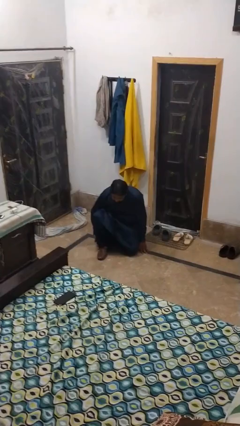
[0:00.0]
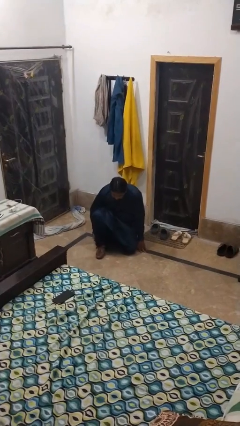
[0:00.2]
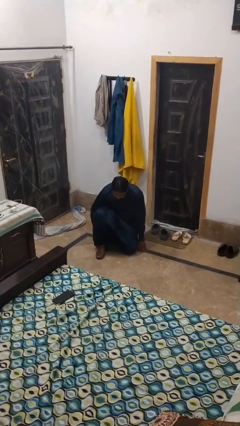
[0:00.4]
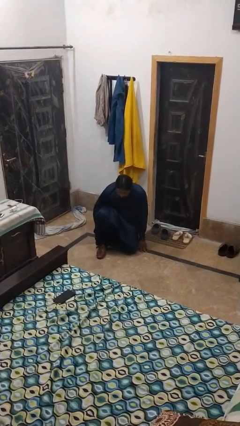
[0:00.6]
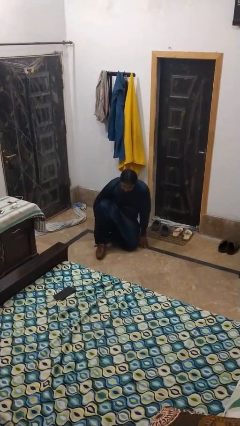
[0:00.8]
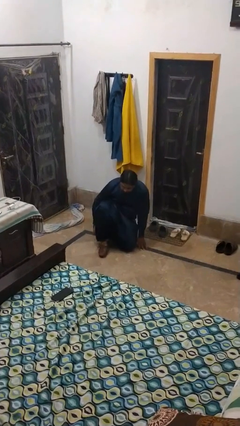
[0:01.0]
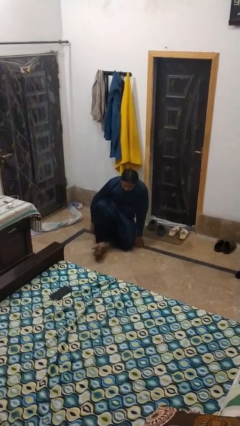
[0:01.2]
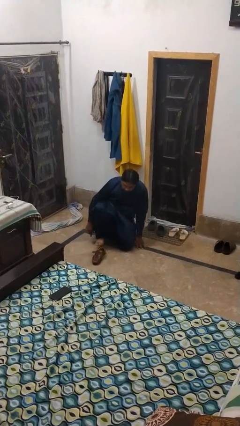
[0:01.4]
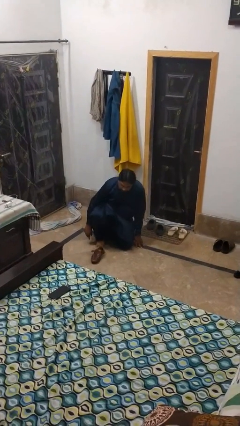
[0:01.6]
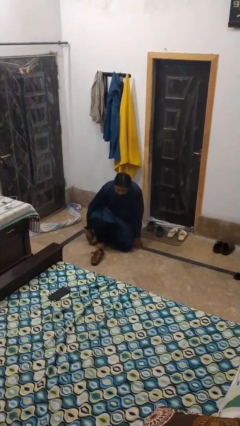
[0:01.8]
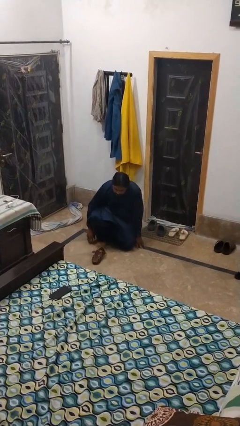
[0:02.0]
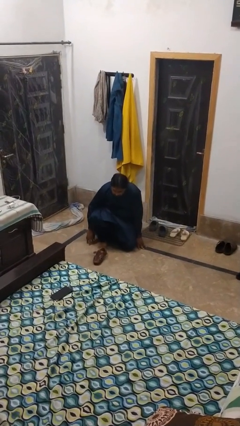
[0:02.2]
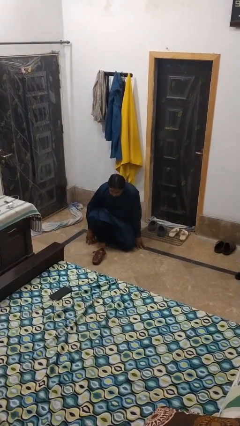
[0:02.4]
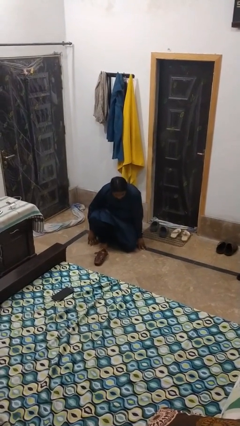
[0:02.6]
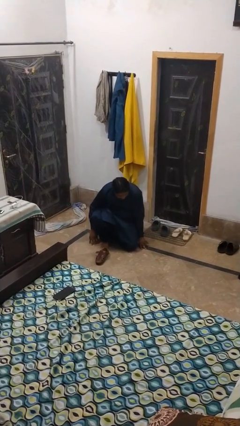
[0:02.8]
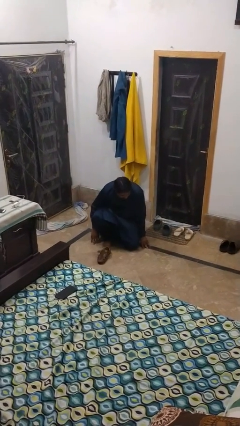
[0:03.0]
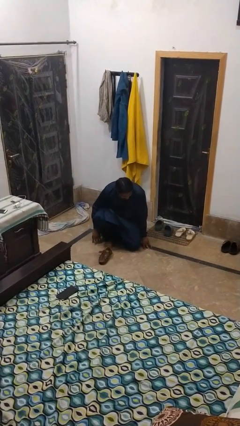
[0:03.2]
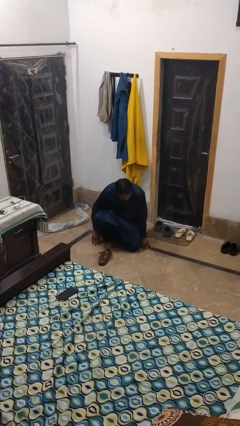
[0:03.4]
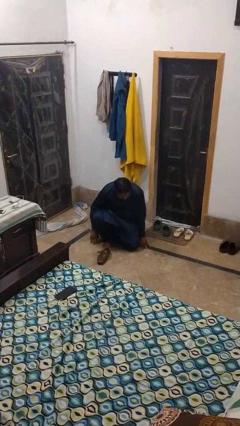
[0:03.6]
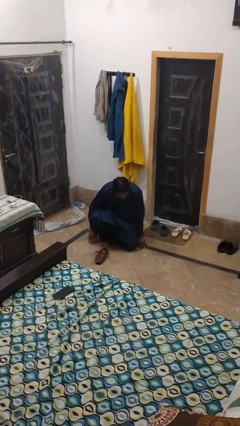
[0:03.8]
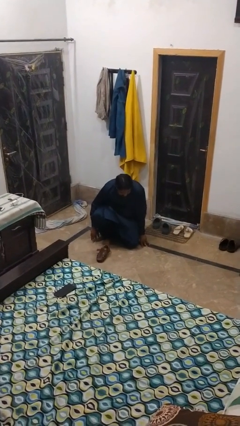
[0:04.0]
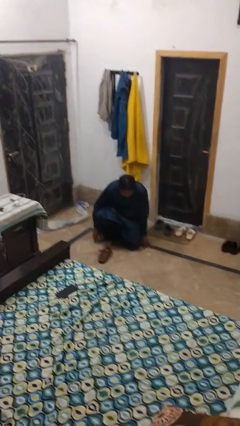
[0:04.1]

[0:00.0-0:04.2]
person takes off shoes

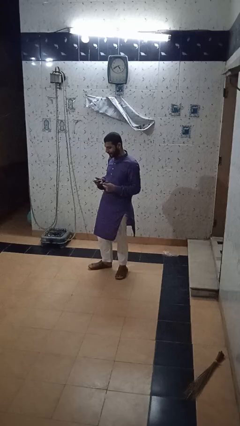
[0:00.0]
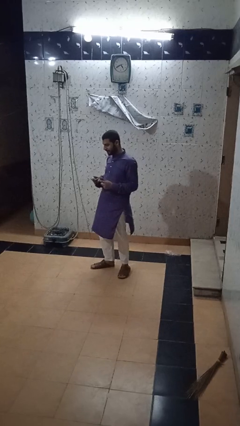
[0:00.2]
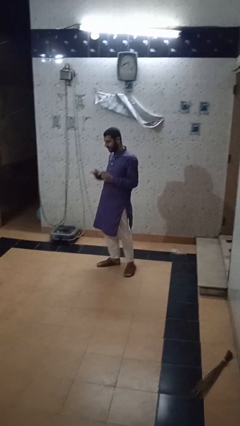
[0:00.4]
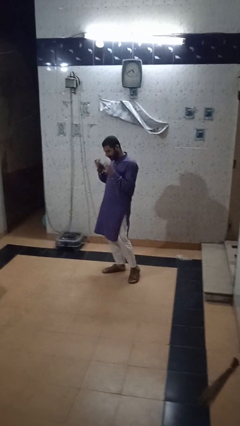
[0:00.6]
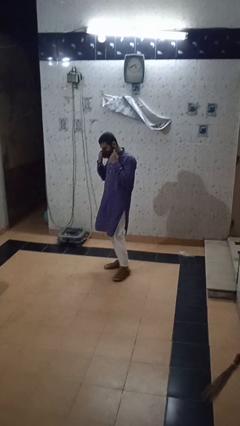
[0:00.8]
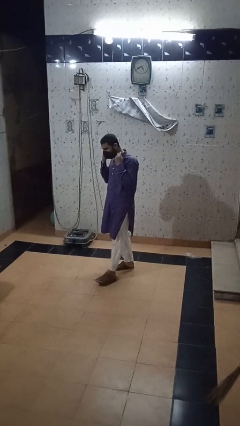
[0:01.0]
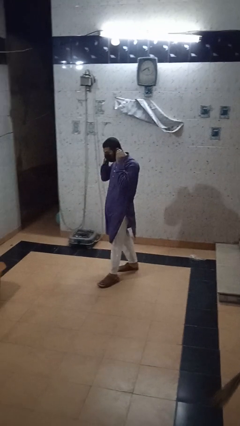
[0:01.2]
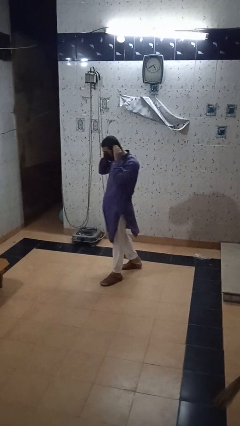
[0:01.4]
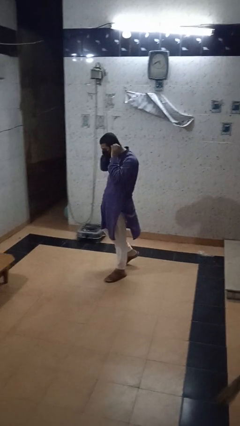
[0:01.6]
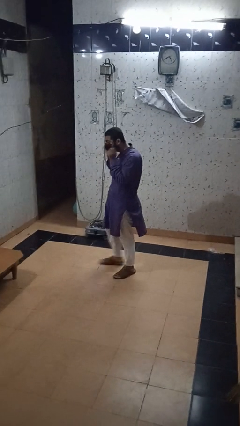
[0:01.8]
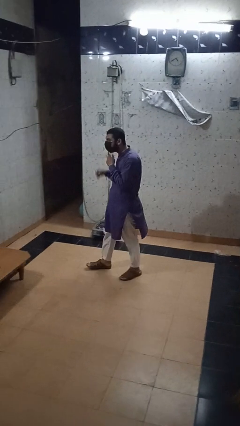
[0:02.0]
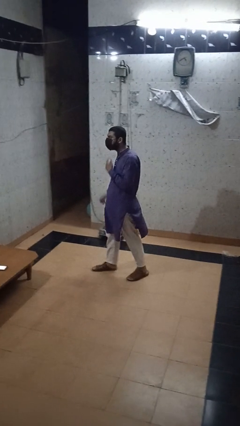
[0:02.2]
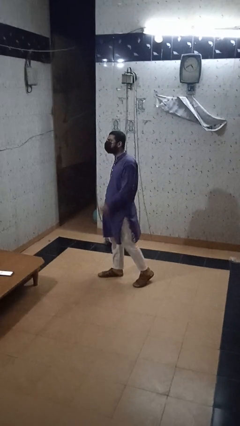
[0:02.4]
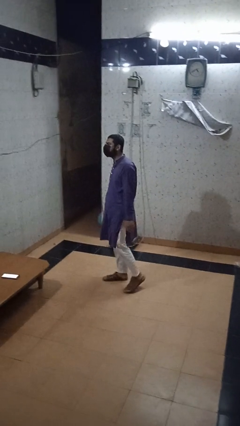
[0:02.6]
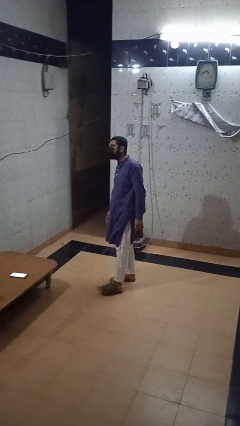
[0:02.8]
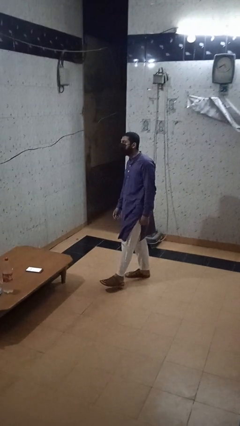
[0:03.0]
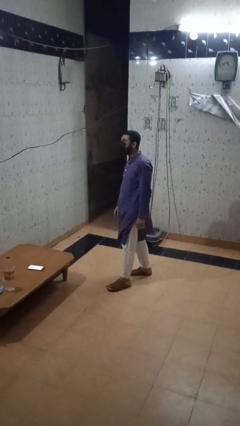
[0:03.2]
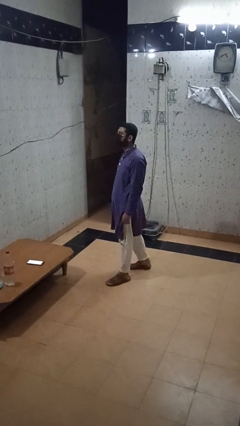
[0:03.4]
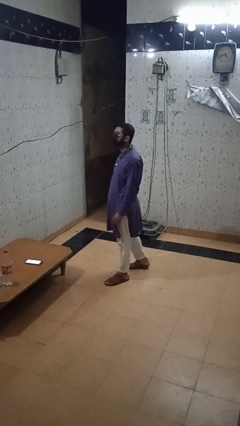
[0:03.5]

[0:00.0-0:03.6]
person puts on facemask

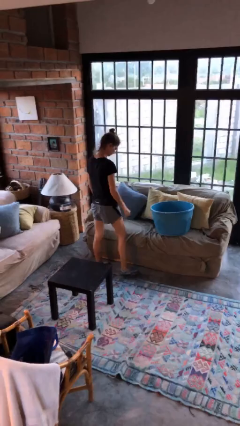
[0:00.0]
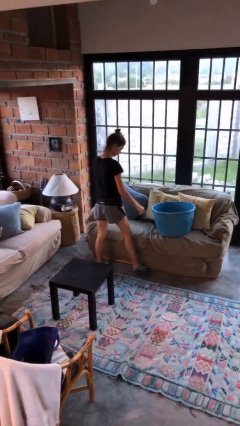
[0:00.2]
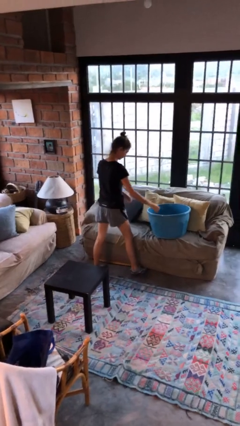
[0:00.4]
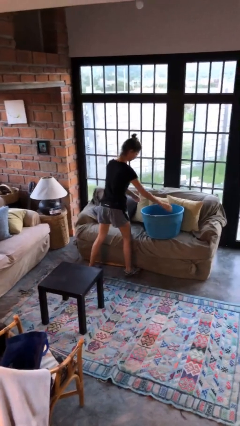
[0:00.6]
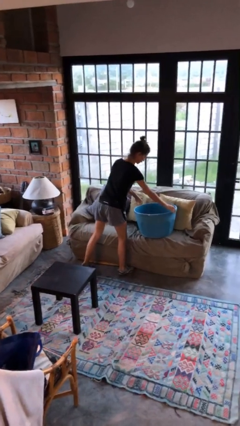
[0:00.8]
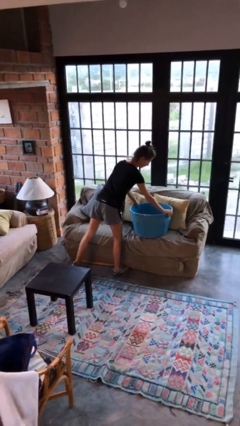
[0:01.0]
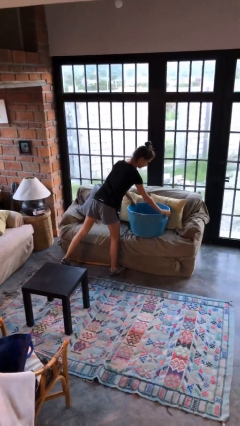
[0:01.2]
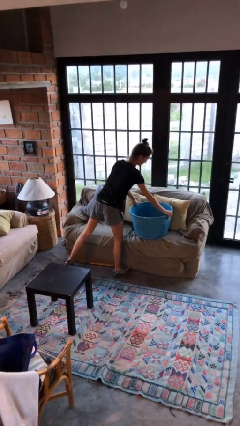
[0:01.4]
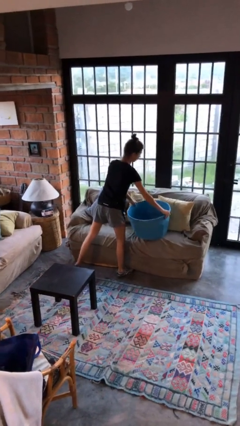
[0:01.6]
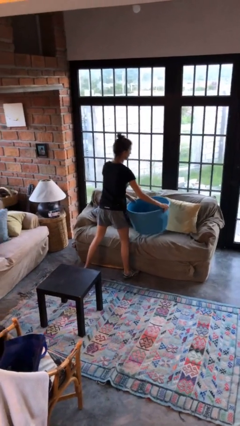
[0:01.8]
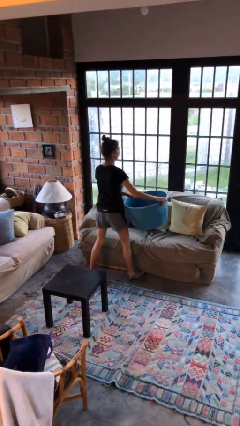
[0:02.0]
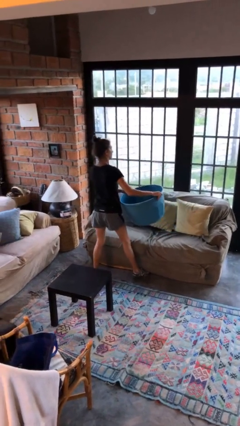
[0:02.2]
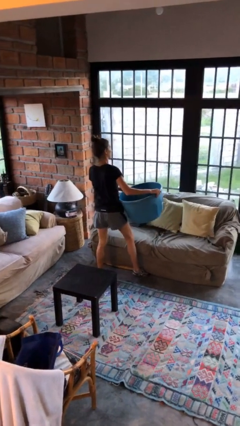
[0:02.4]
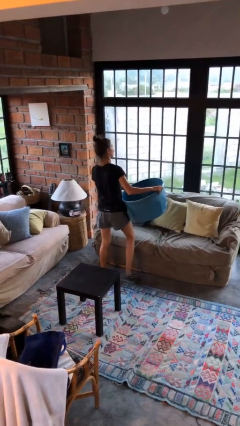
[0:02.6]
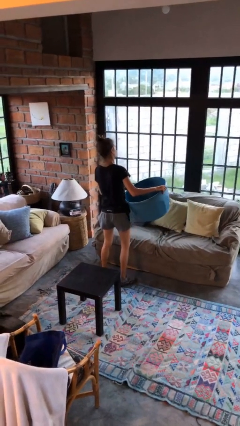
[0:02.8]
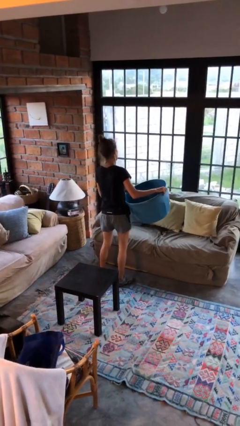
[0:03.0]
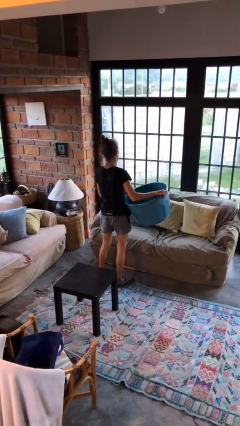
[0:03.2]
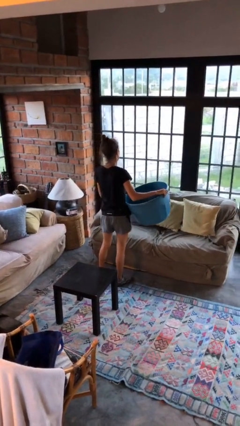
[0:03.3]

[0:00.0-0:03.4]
person picks up object from couch

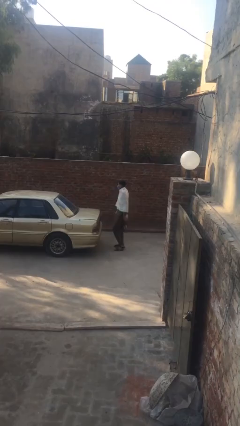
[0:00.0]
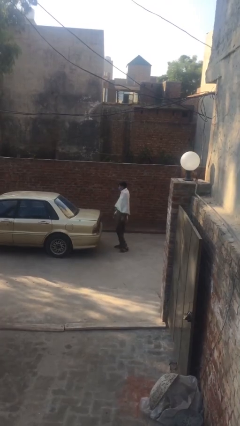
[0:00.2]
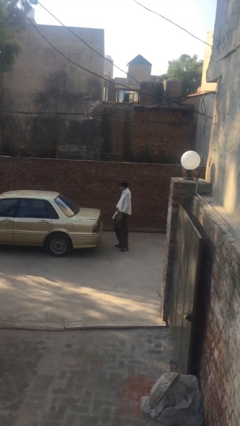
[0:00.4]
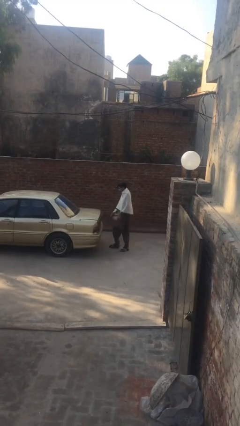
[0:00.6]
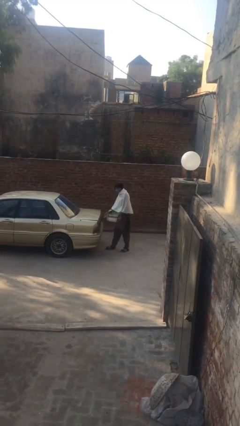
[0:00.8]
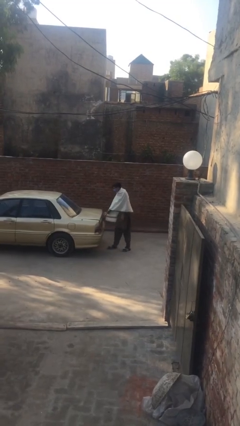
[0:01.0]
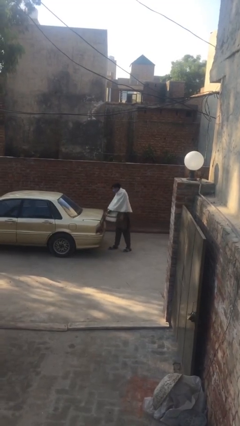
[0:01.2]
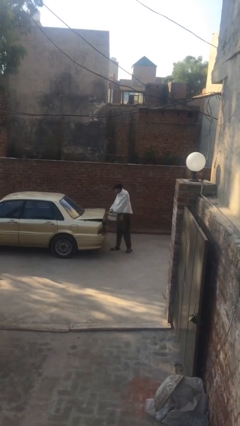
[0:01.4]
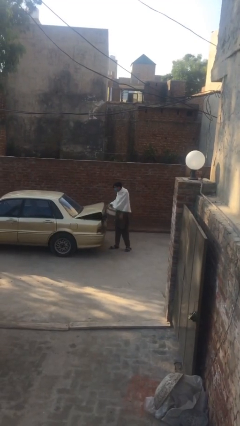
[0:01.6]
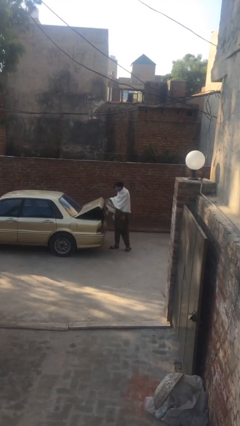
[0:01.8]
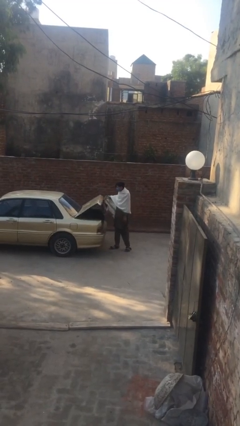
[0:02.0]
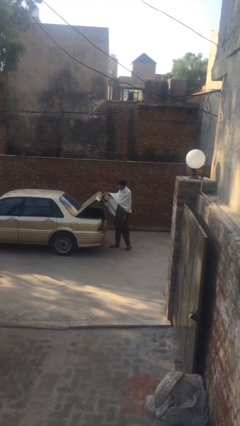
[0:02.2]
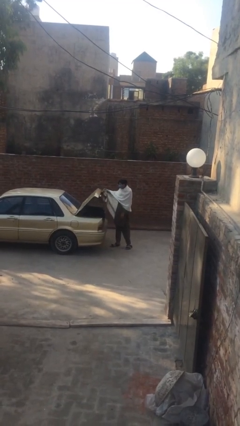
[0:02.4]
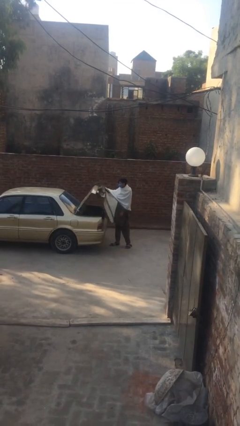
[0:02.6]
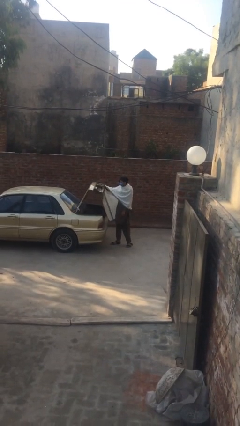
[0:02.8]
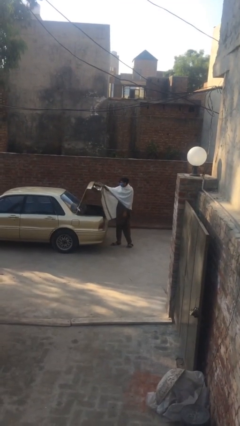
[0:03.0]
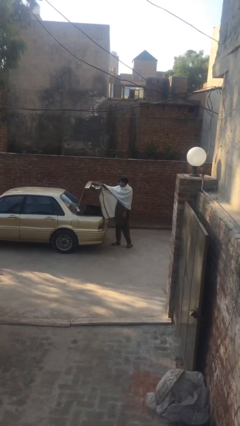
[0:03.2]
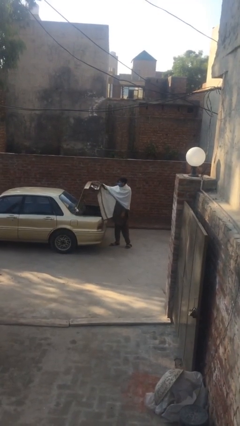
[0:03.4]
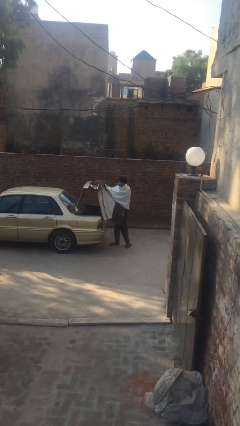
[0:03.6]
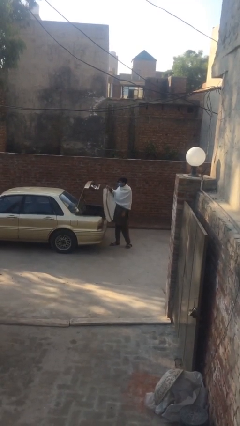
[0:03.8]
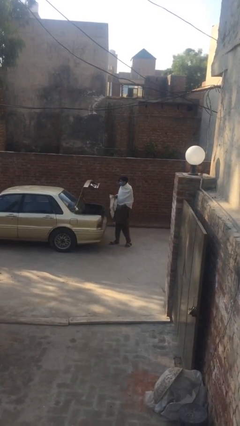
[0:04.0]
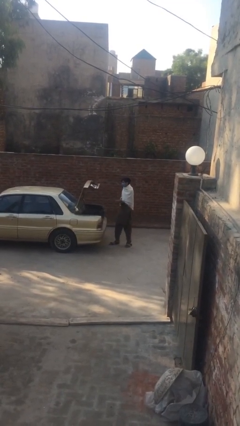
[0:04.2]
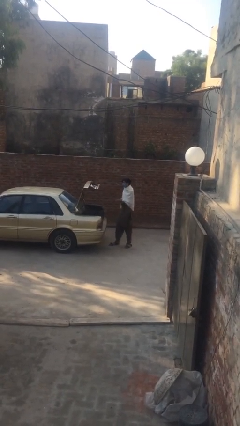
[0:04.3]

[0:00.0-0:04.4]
person opens car trunk

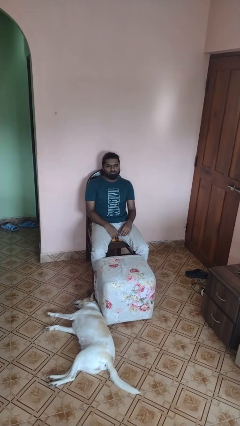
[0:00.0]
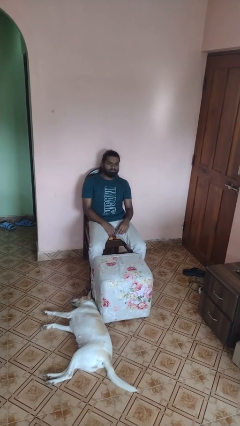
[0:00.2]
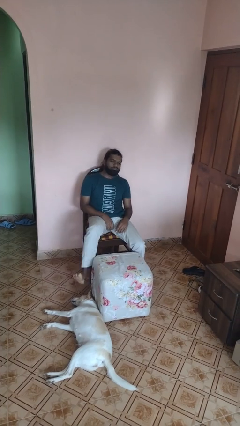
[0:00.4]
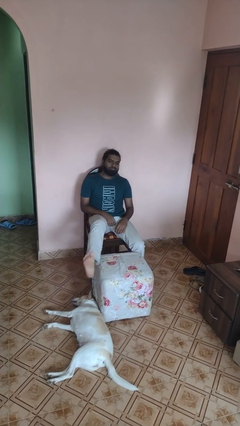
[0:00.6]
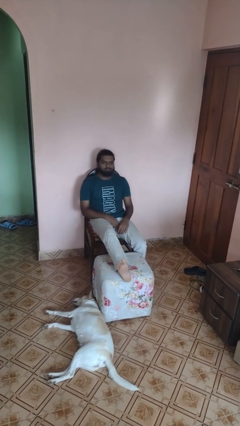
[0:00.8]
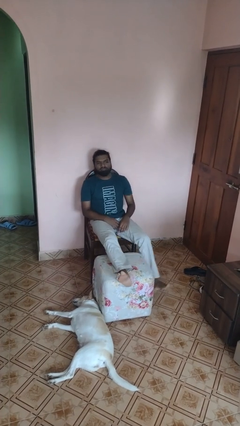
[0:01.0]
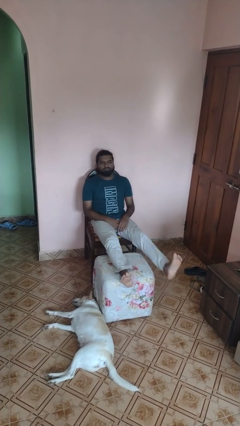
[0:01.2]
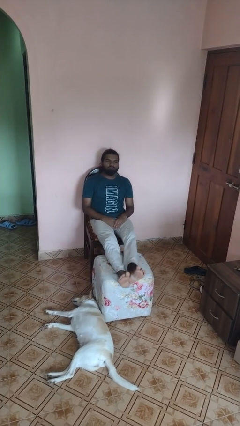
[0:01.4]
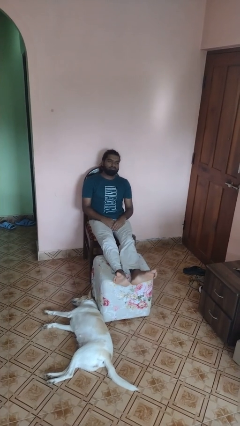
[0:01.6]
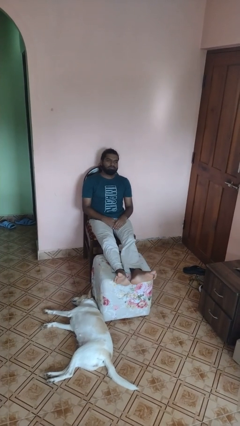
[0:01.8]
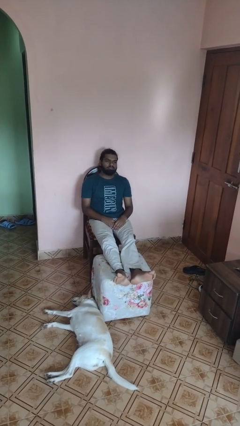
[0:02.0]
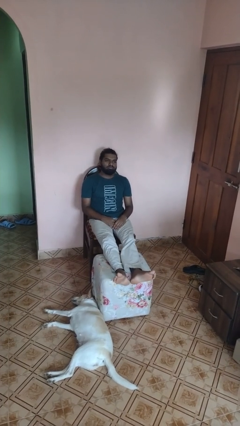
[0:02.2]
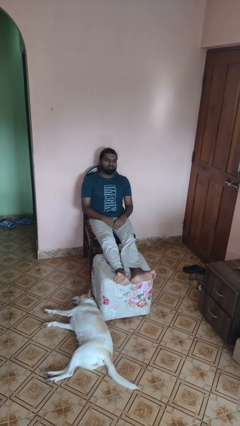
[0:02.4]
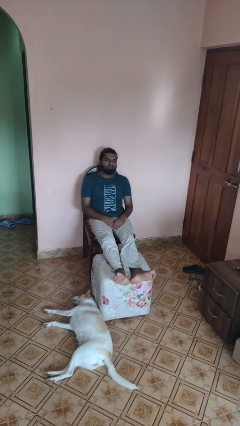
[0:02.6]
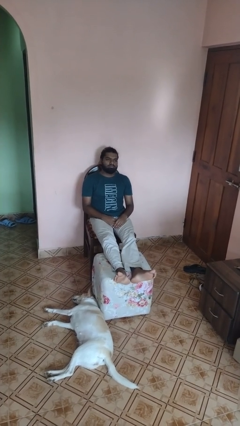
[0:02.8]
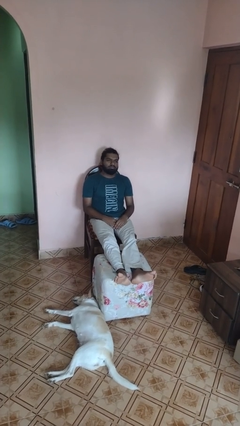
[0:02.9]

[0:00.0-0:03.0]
person puts feet up
